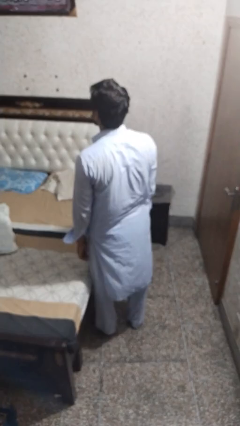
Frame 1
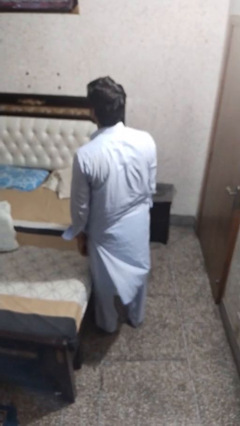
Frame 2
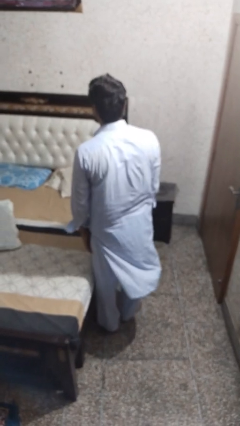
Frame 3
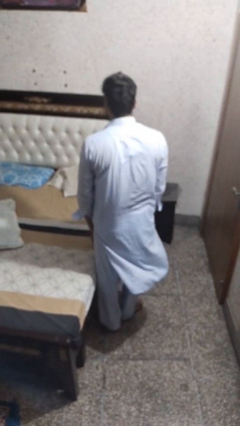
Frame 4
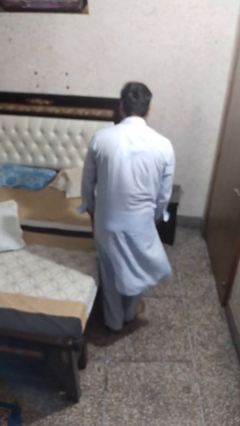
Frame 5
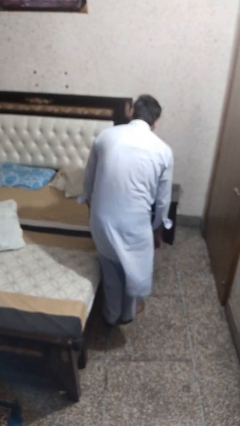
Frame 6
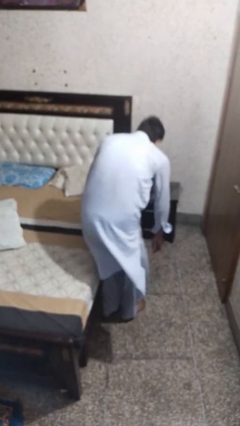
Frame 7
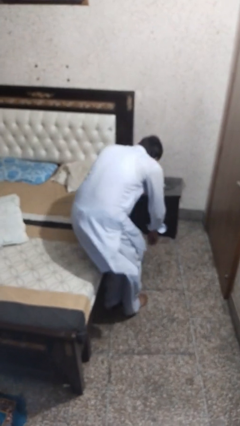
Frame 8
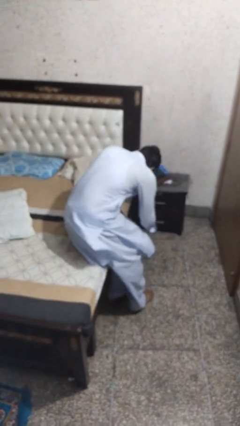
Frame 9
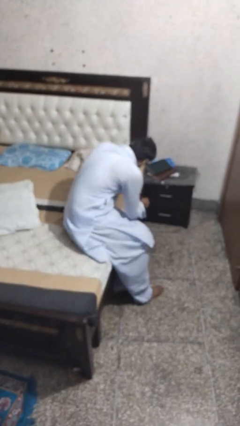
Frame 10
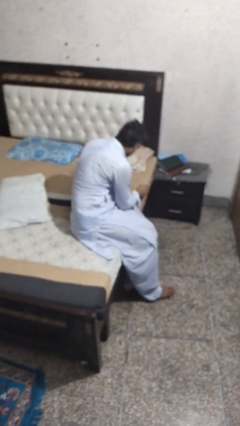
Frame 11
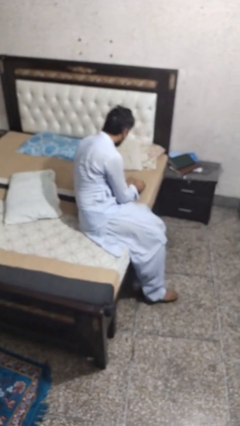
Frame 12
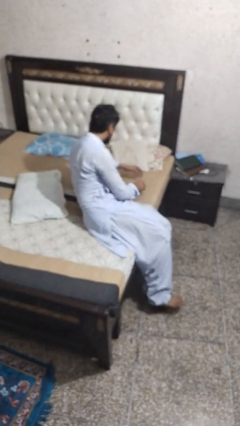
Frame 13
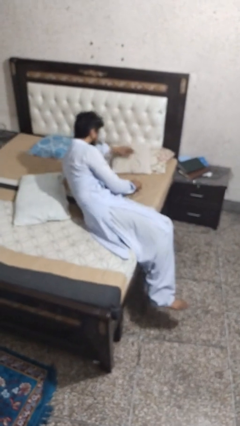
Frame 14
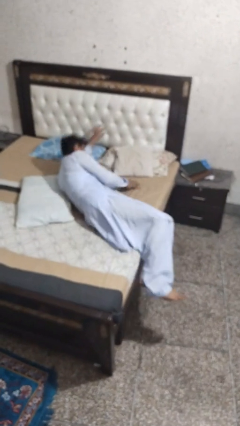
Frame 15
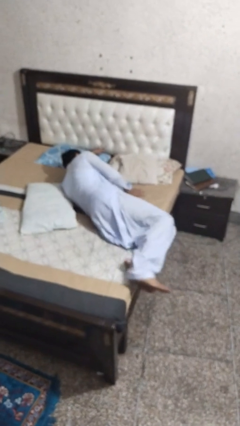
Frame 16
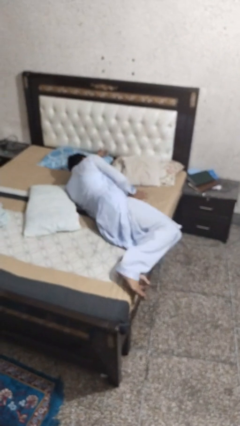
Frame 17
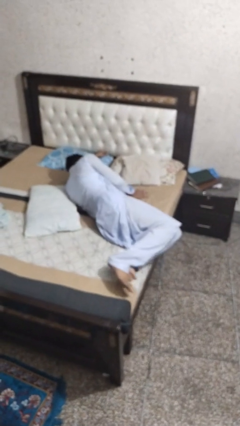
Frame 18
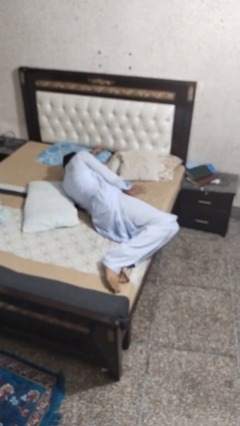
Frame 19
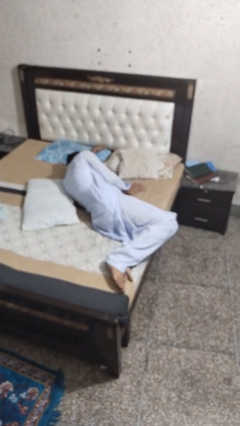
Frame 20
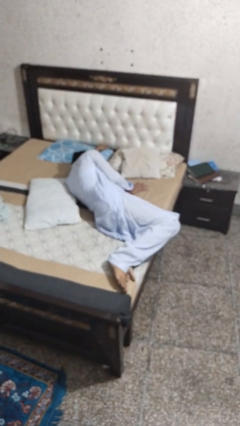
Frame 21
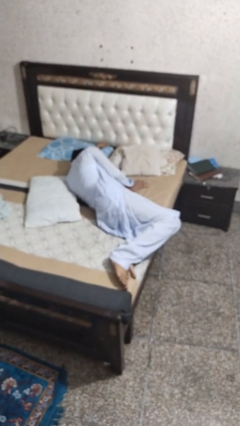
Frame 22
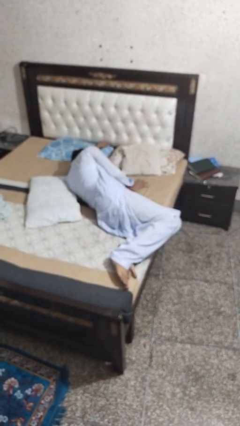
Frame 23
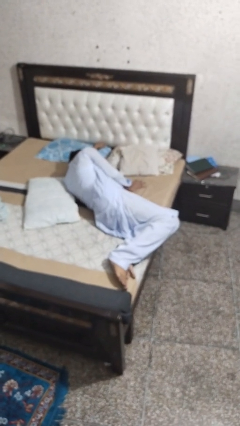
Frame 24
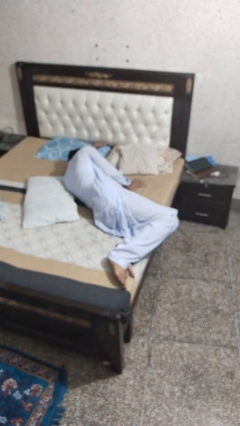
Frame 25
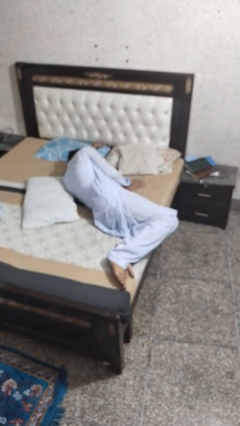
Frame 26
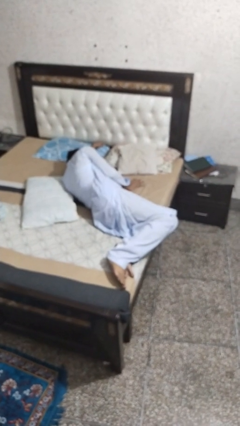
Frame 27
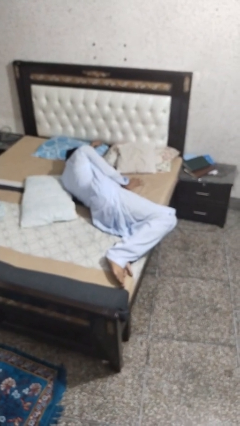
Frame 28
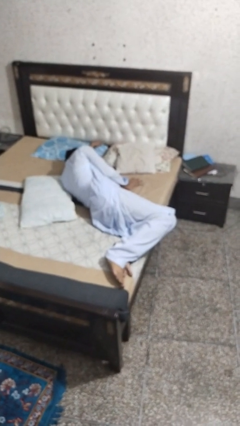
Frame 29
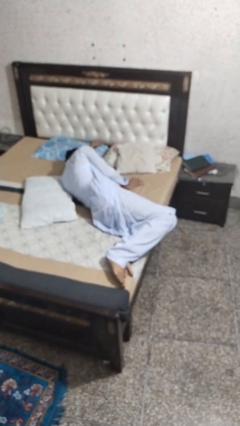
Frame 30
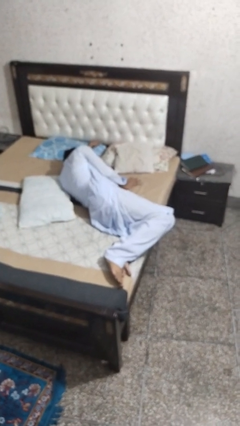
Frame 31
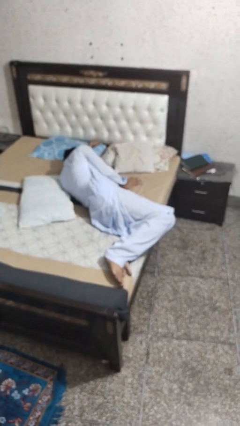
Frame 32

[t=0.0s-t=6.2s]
person lies down on bed

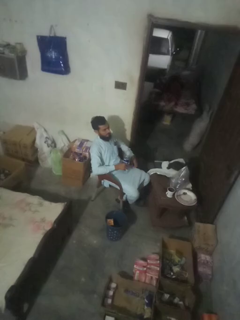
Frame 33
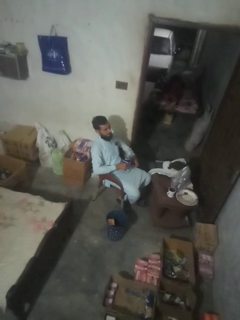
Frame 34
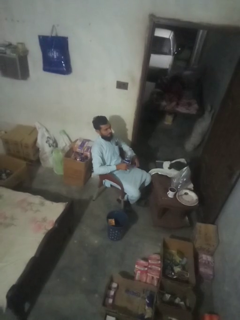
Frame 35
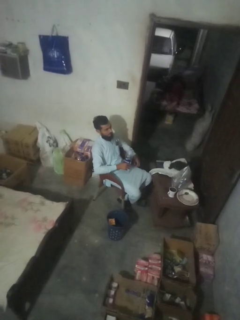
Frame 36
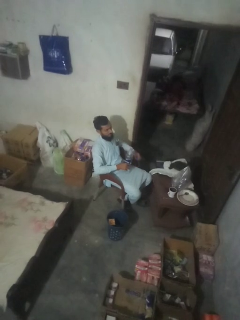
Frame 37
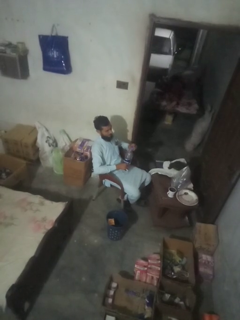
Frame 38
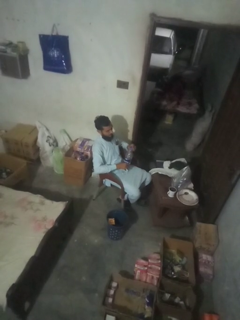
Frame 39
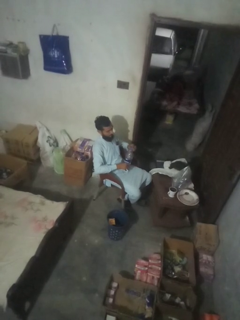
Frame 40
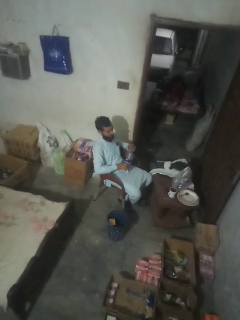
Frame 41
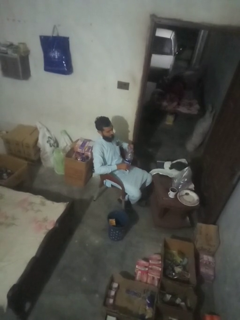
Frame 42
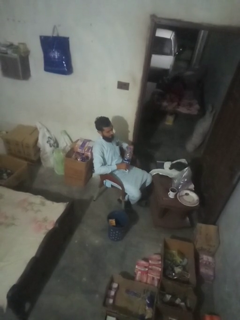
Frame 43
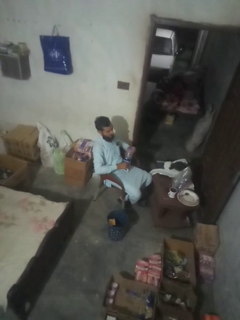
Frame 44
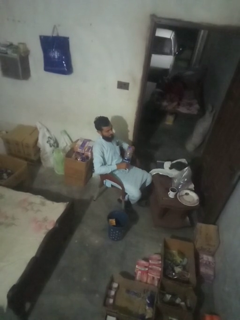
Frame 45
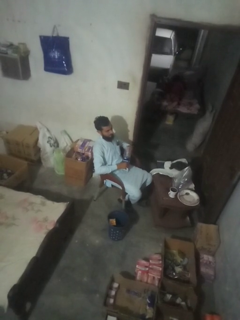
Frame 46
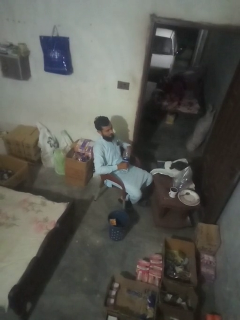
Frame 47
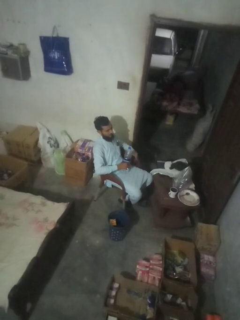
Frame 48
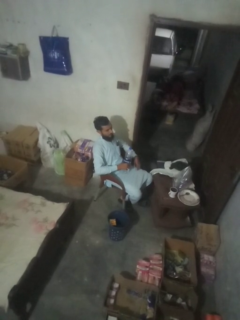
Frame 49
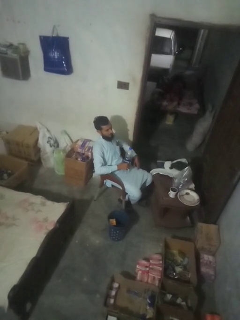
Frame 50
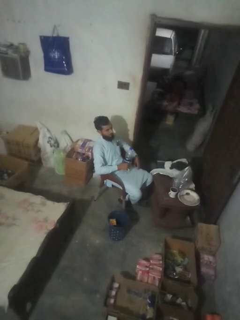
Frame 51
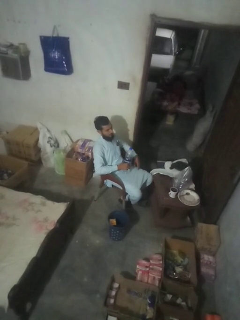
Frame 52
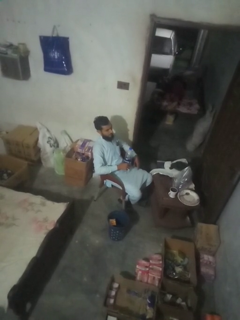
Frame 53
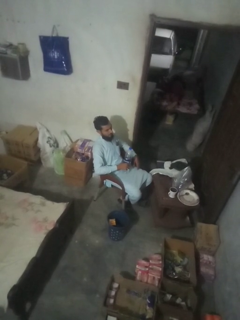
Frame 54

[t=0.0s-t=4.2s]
person screws lid to bottle

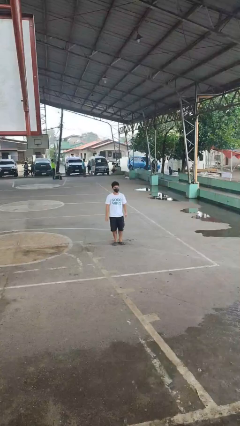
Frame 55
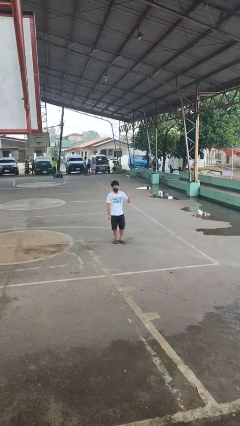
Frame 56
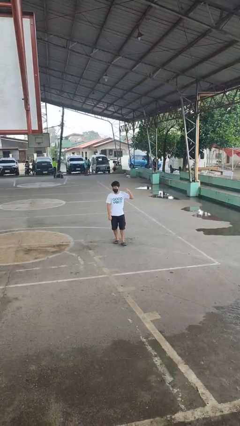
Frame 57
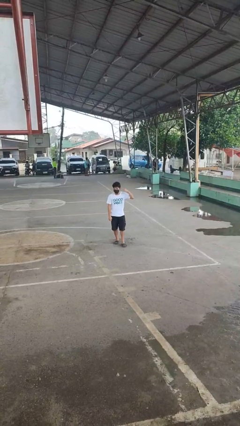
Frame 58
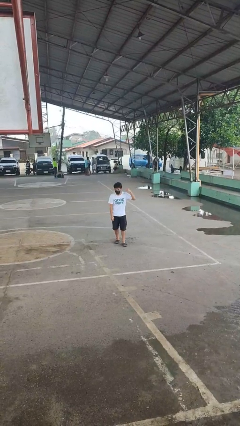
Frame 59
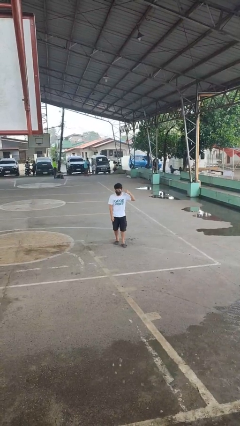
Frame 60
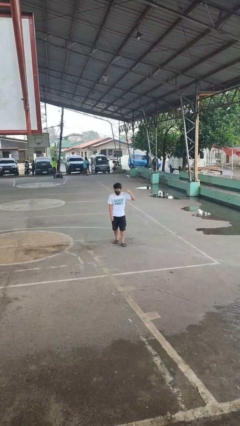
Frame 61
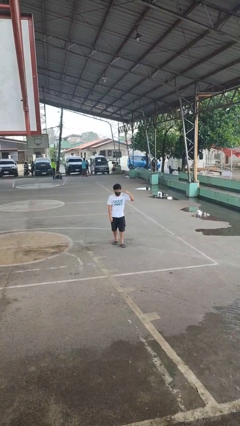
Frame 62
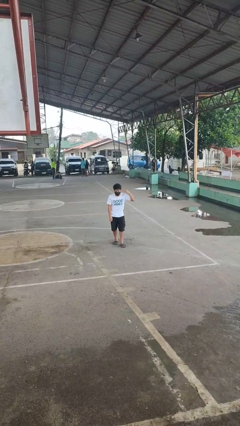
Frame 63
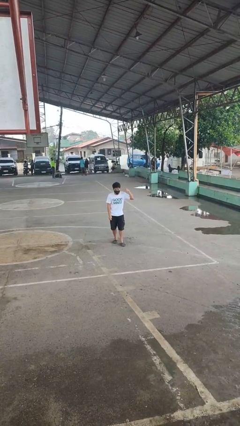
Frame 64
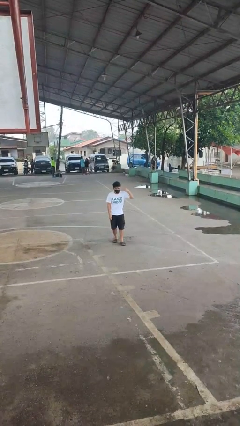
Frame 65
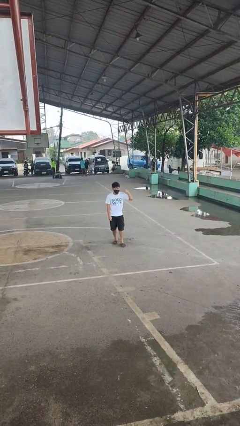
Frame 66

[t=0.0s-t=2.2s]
person gestures listen closely

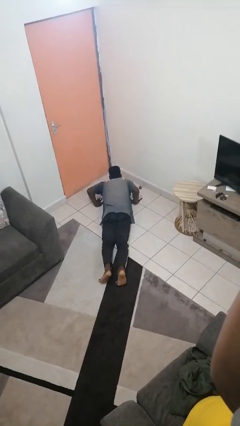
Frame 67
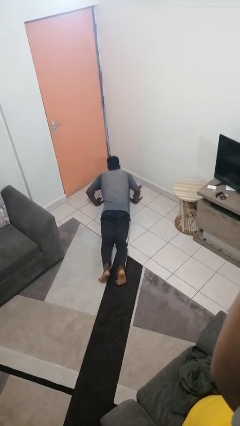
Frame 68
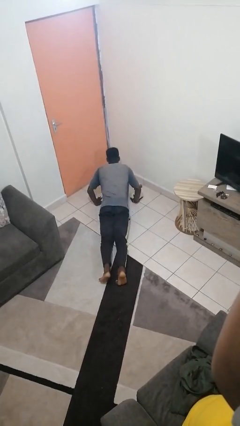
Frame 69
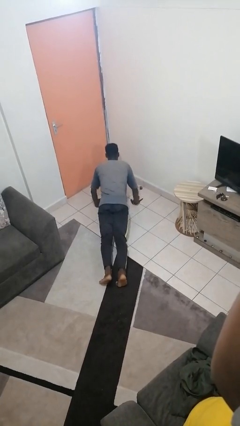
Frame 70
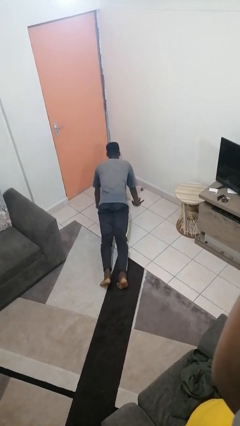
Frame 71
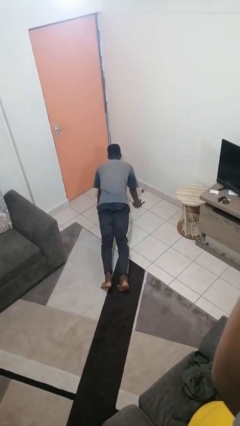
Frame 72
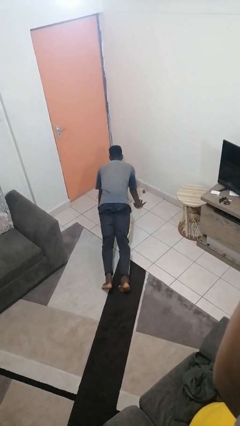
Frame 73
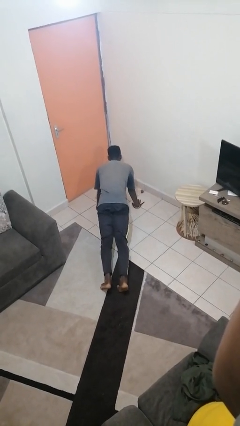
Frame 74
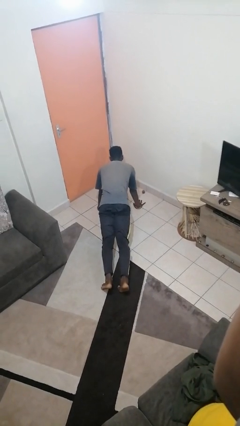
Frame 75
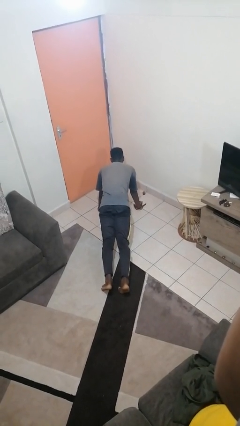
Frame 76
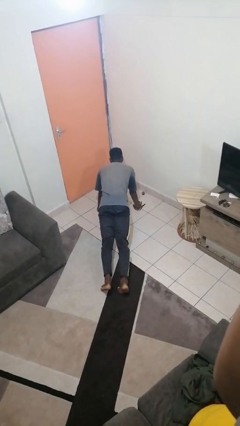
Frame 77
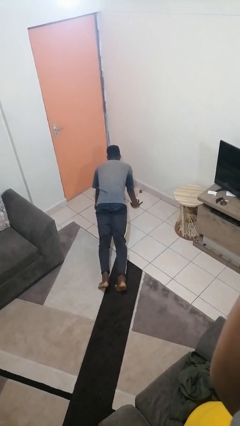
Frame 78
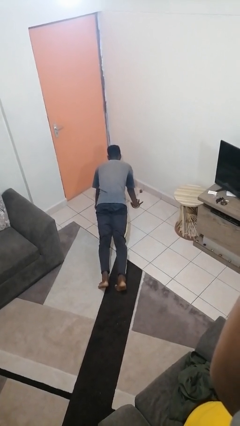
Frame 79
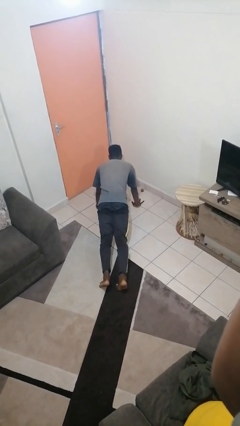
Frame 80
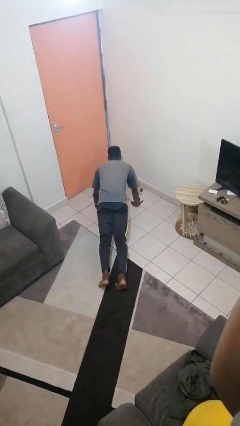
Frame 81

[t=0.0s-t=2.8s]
person exercises with pushup

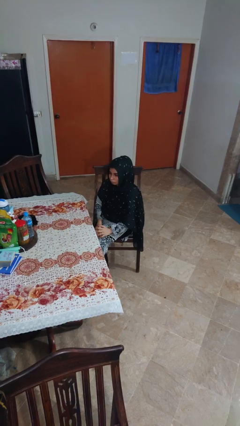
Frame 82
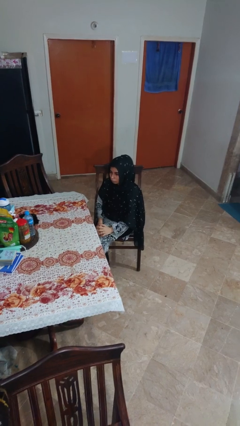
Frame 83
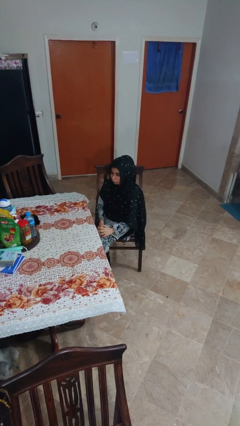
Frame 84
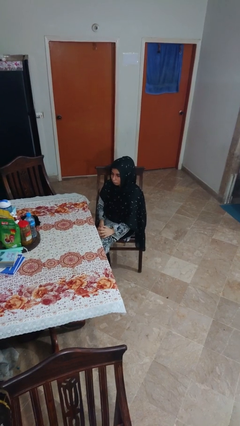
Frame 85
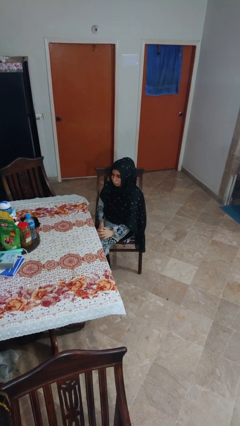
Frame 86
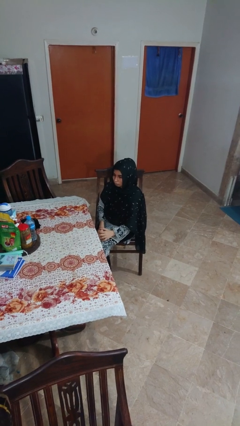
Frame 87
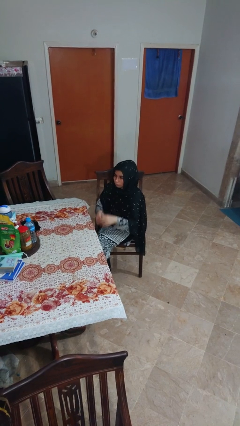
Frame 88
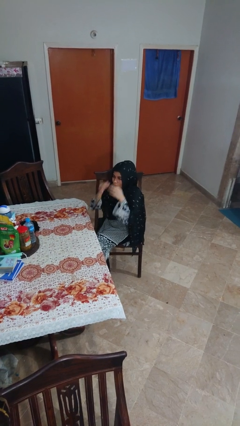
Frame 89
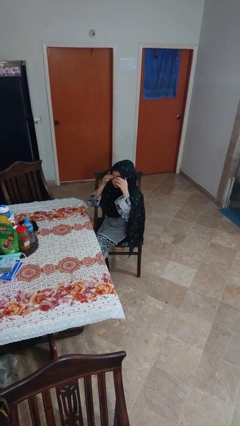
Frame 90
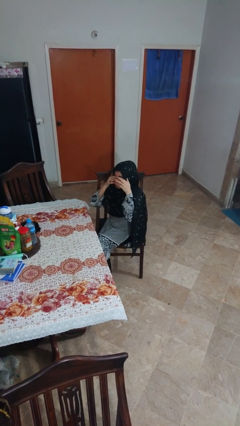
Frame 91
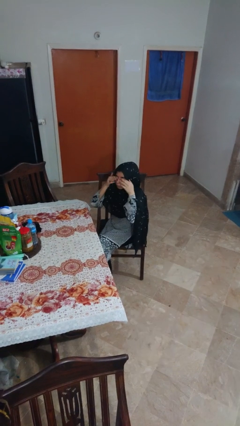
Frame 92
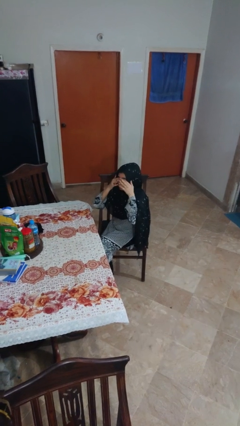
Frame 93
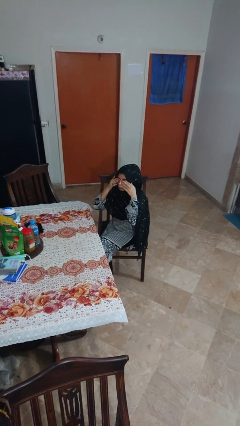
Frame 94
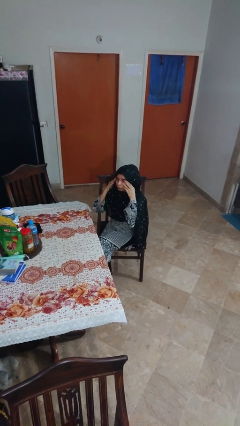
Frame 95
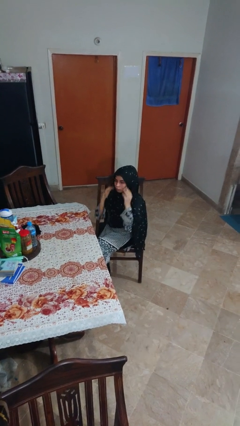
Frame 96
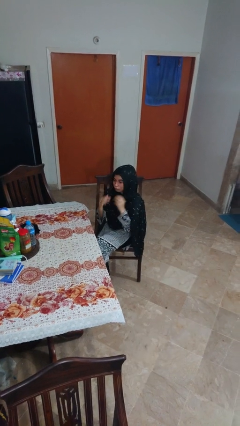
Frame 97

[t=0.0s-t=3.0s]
person rubs eyes

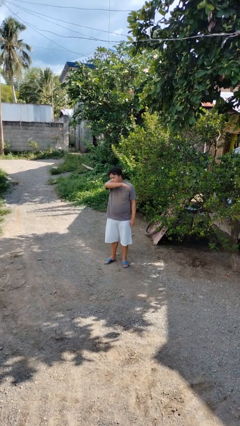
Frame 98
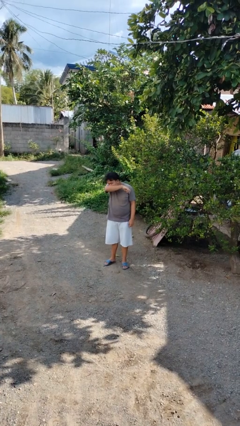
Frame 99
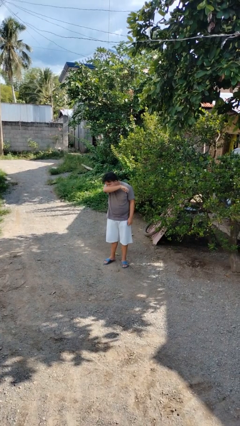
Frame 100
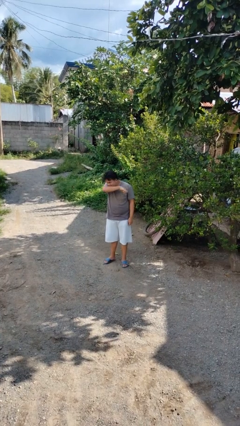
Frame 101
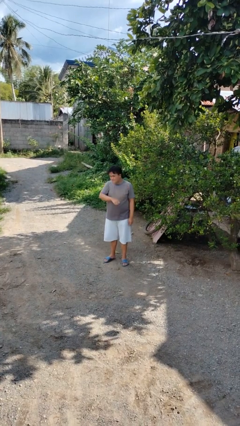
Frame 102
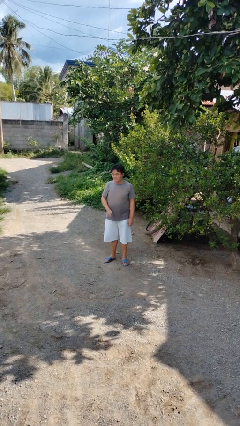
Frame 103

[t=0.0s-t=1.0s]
person sneezes into arm
